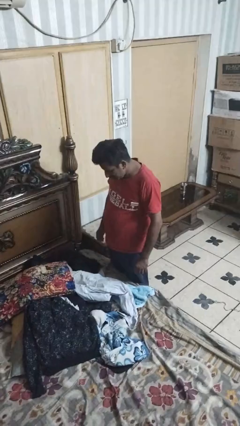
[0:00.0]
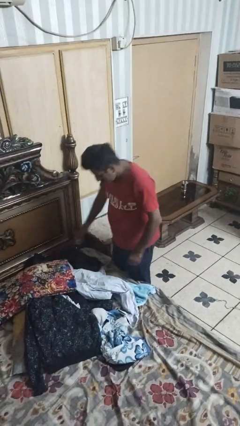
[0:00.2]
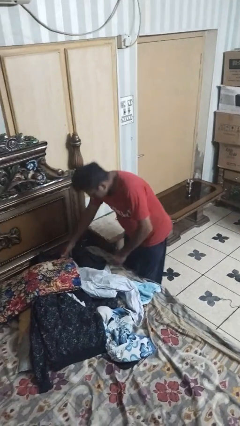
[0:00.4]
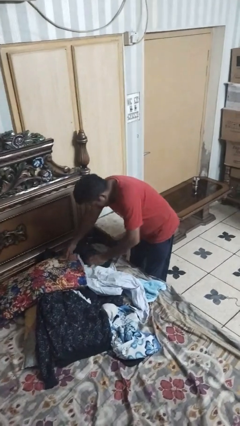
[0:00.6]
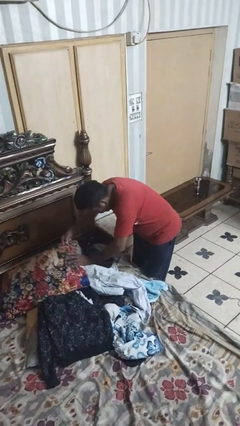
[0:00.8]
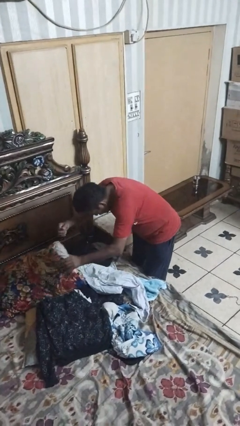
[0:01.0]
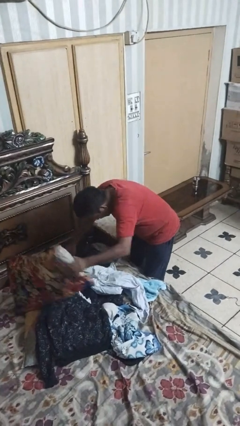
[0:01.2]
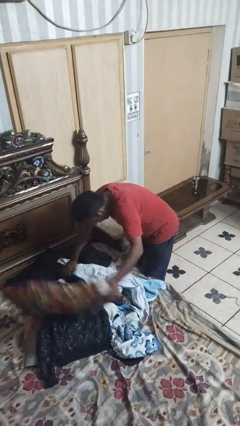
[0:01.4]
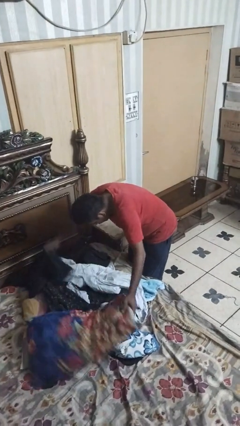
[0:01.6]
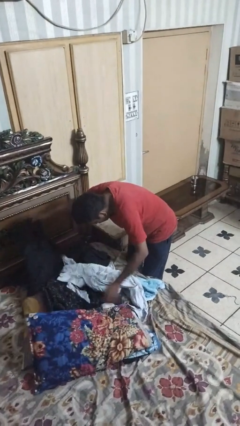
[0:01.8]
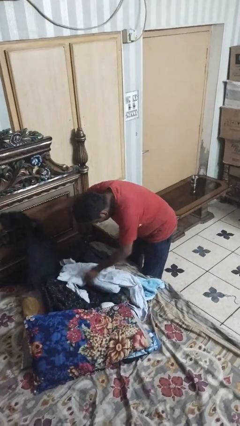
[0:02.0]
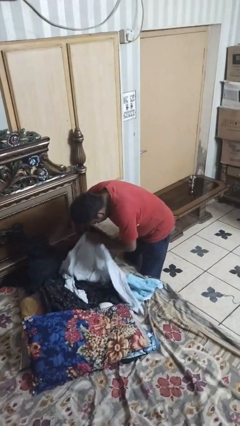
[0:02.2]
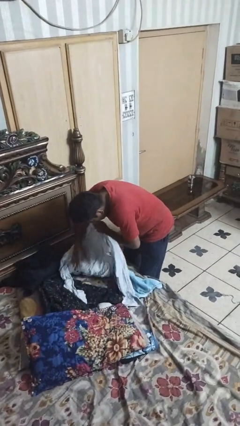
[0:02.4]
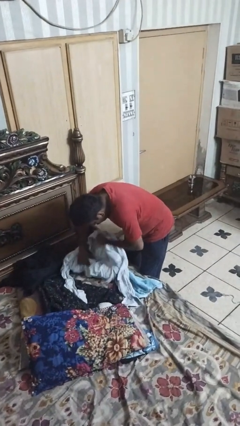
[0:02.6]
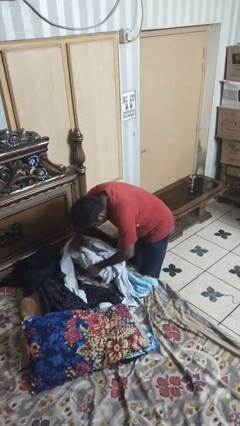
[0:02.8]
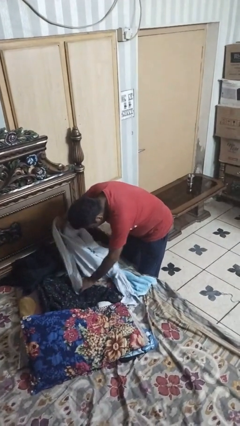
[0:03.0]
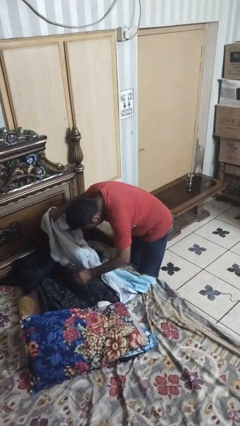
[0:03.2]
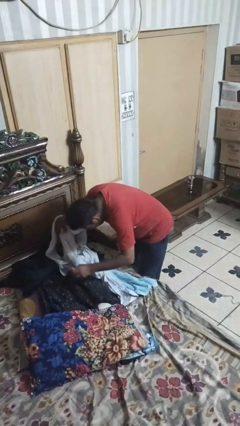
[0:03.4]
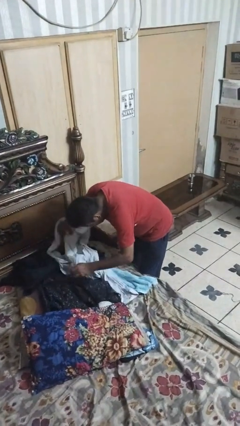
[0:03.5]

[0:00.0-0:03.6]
person searches under bed

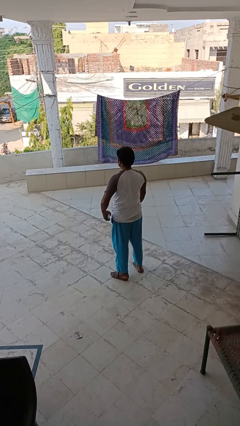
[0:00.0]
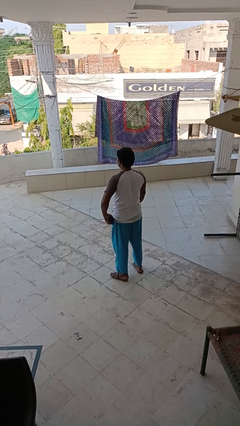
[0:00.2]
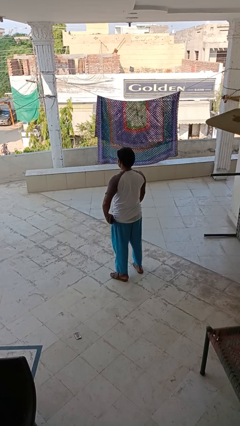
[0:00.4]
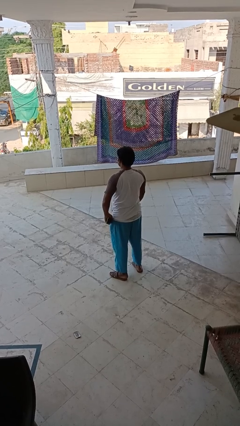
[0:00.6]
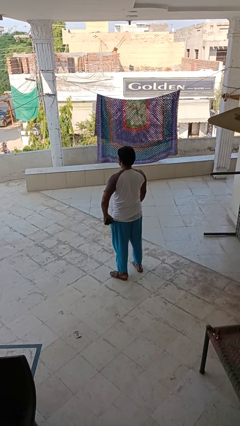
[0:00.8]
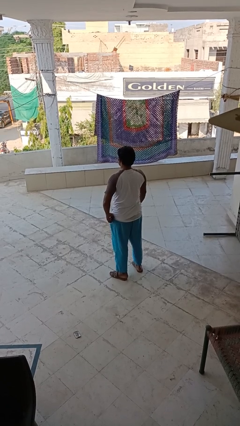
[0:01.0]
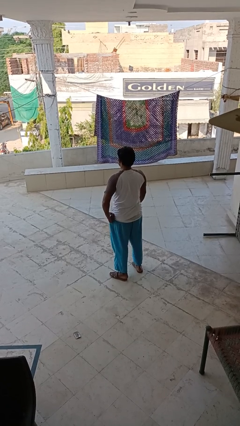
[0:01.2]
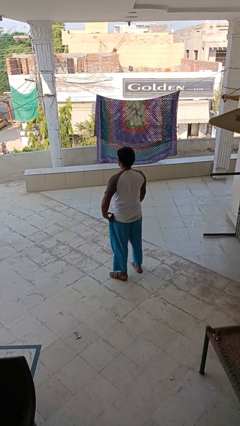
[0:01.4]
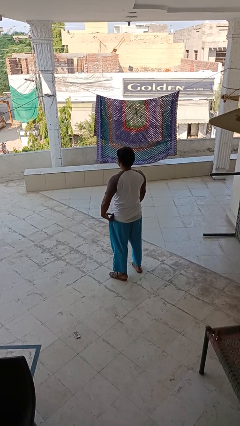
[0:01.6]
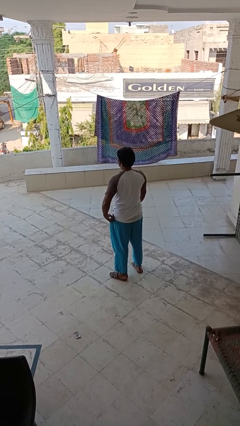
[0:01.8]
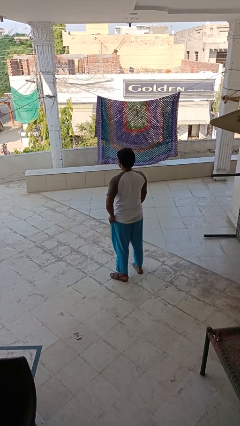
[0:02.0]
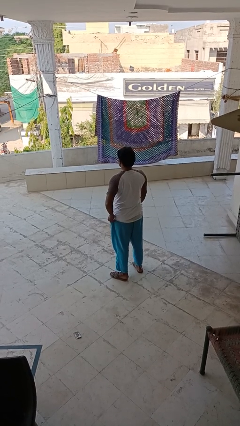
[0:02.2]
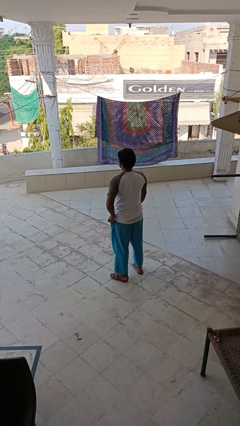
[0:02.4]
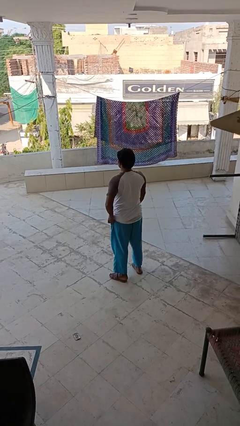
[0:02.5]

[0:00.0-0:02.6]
person puts phone into pocket

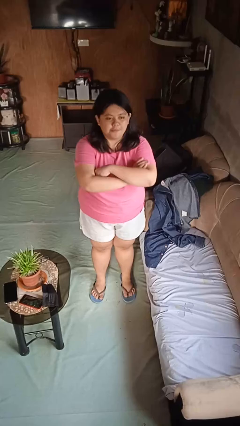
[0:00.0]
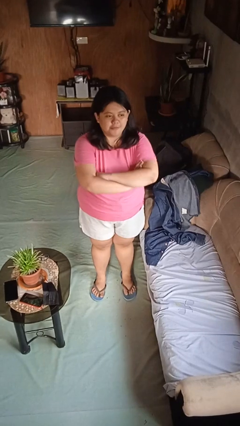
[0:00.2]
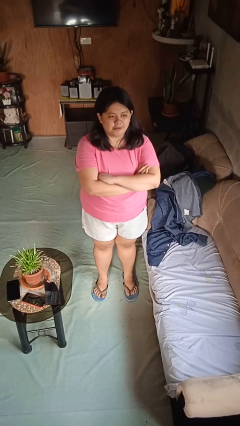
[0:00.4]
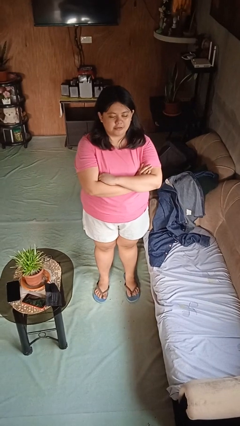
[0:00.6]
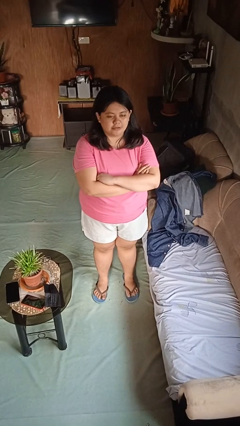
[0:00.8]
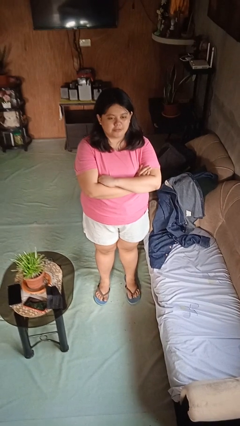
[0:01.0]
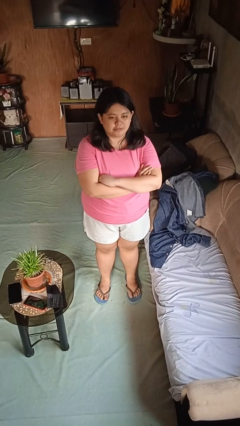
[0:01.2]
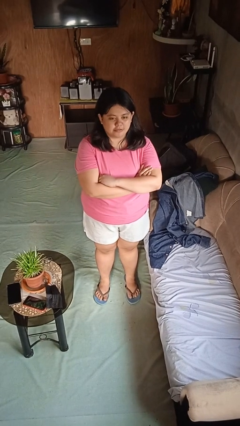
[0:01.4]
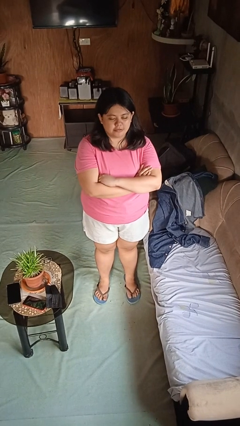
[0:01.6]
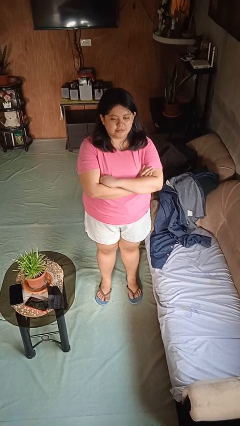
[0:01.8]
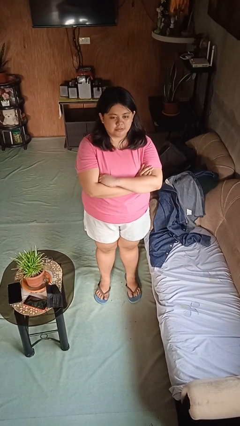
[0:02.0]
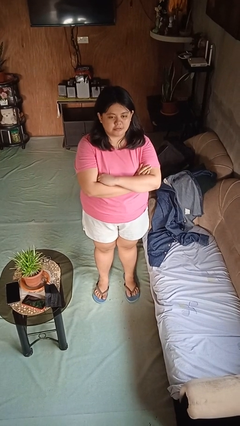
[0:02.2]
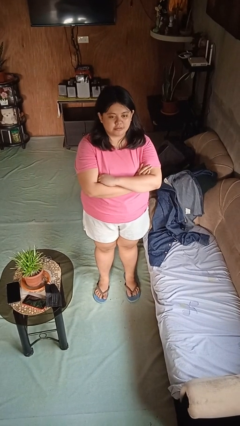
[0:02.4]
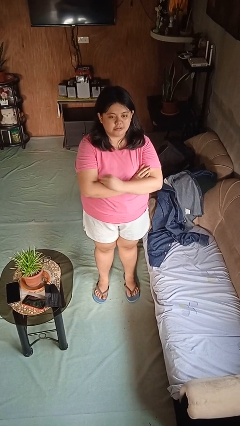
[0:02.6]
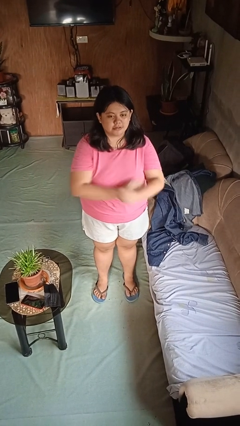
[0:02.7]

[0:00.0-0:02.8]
person crosses arms

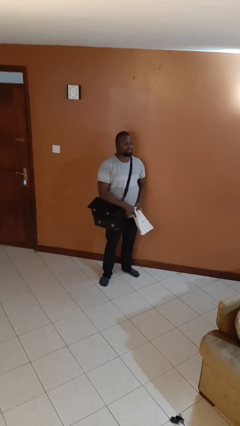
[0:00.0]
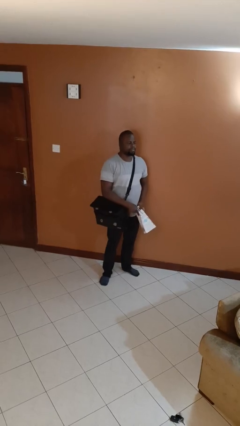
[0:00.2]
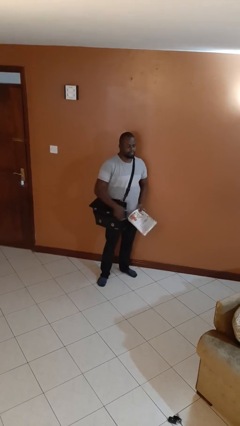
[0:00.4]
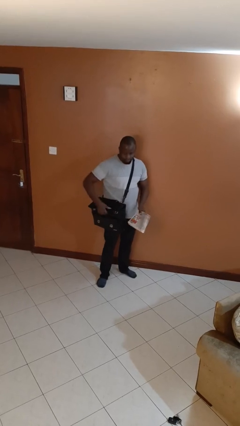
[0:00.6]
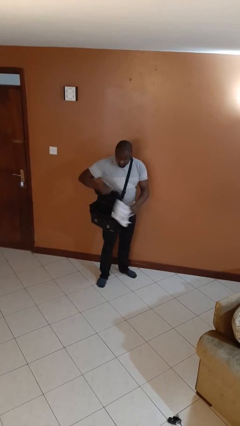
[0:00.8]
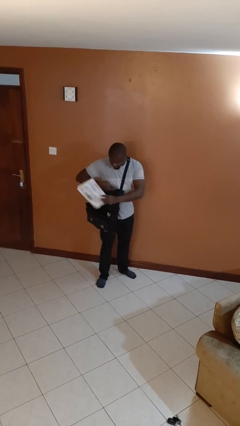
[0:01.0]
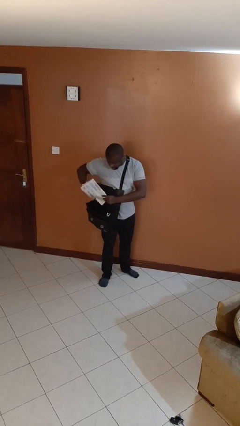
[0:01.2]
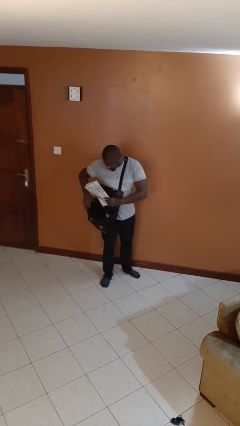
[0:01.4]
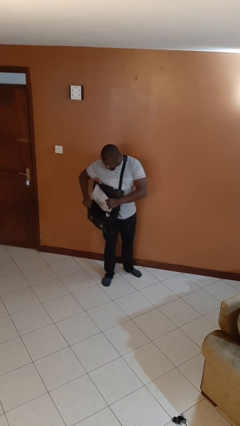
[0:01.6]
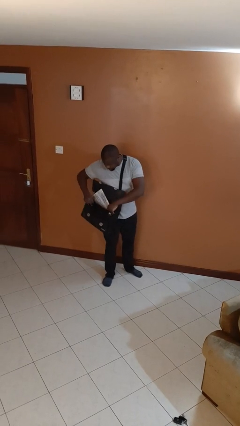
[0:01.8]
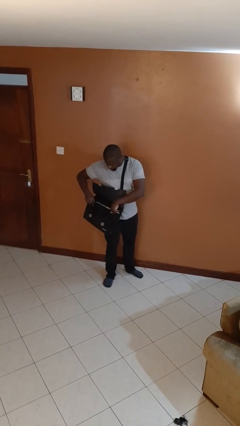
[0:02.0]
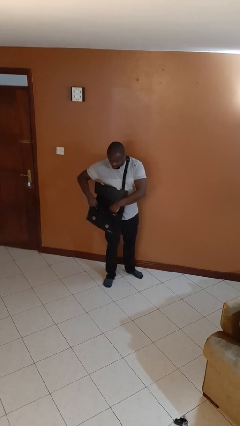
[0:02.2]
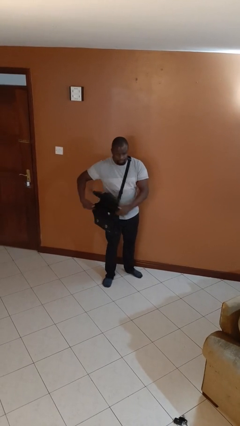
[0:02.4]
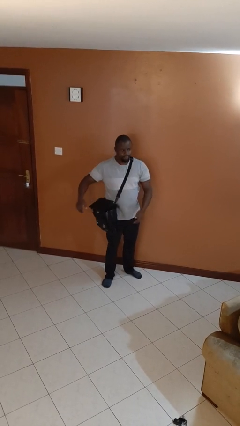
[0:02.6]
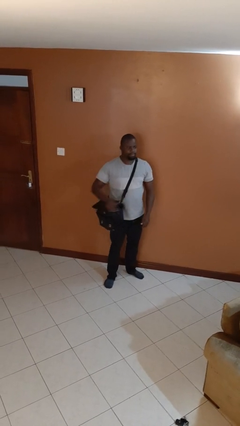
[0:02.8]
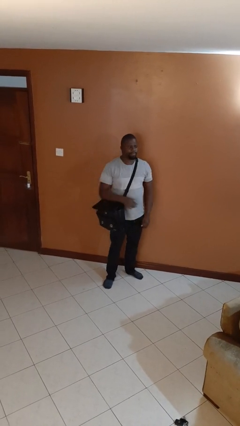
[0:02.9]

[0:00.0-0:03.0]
person puts object into purse

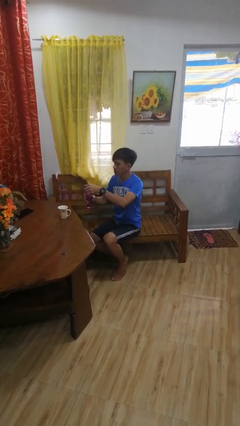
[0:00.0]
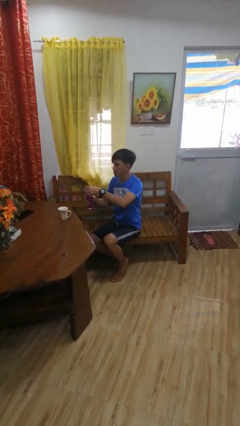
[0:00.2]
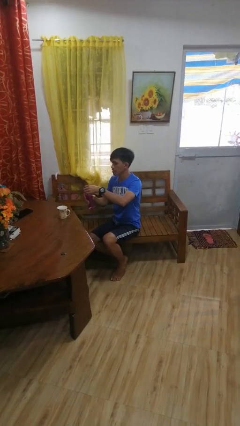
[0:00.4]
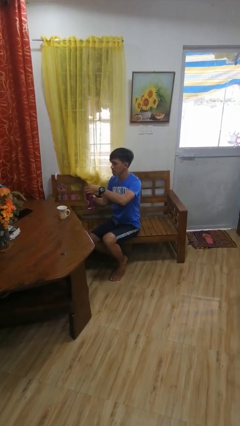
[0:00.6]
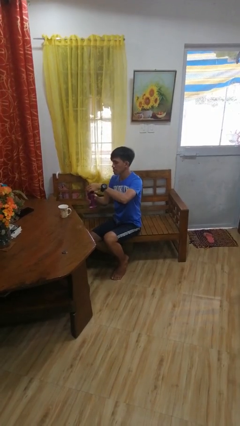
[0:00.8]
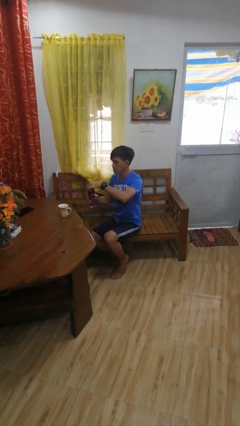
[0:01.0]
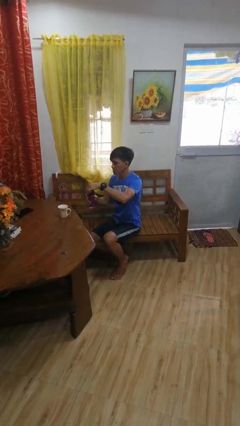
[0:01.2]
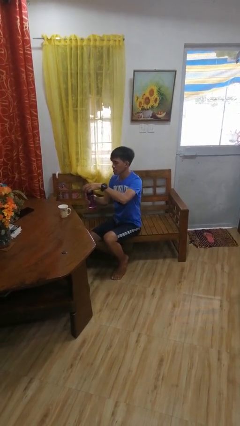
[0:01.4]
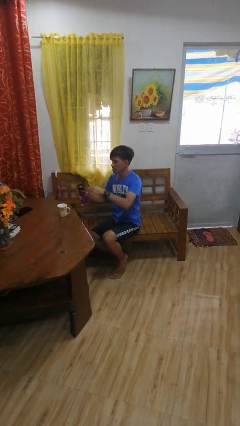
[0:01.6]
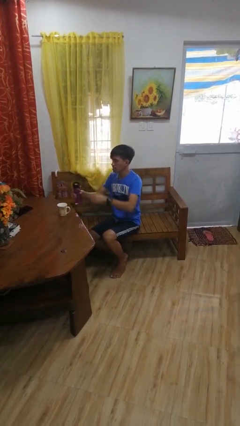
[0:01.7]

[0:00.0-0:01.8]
person screws lid to bottle

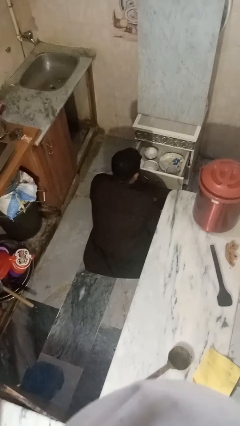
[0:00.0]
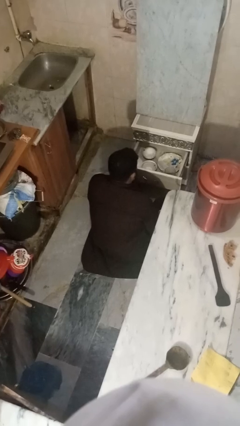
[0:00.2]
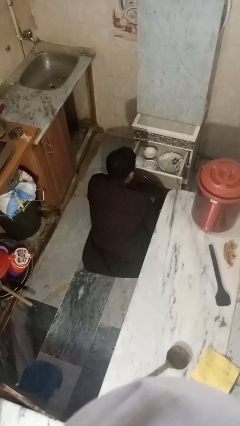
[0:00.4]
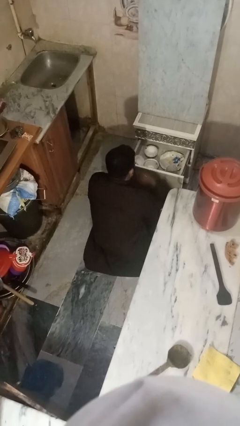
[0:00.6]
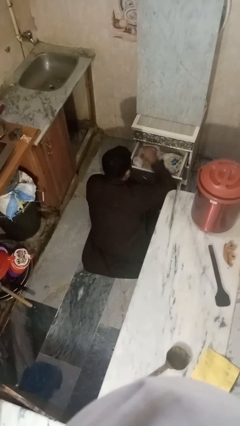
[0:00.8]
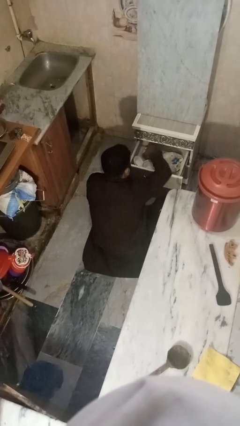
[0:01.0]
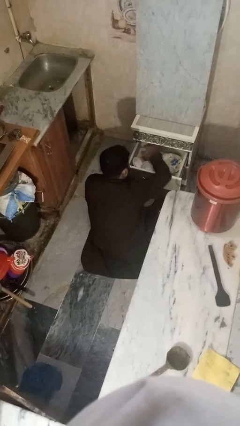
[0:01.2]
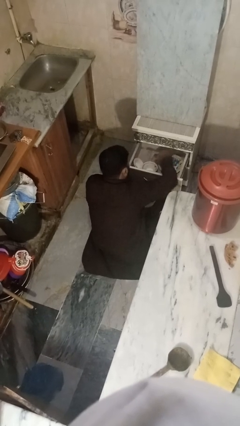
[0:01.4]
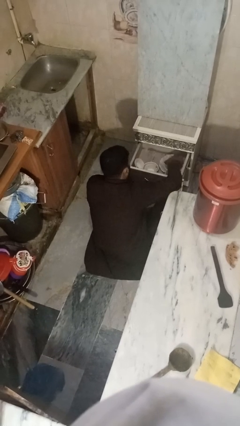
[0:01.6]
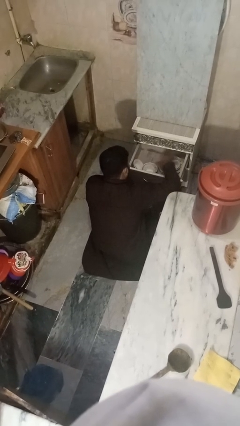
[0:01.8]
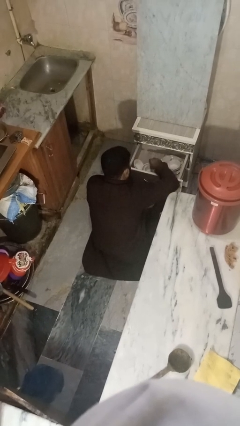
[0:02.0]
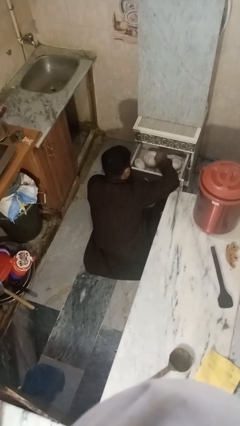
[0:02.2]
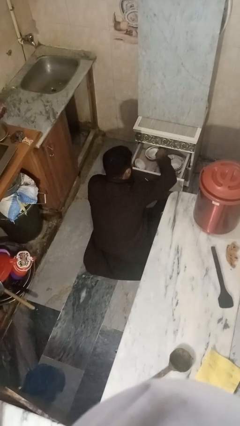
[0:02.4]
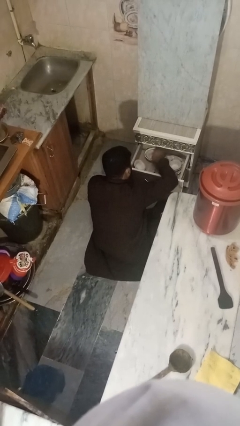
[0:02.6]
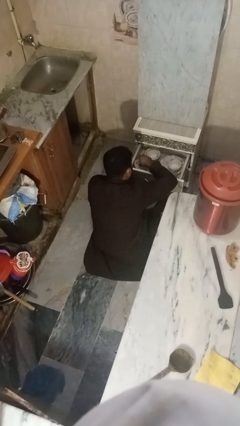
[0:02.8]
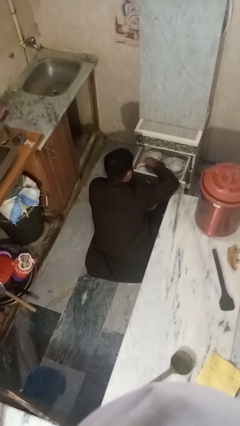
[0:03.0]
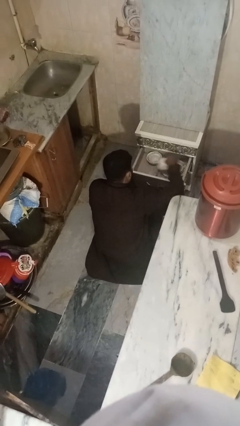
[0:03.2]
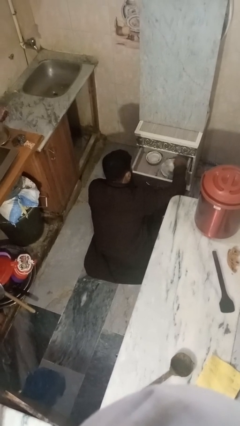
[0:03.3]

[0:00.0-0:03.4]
person searches in kitchen drawer

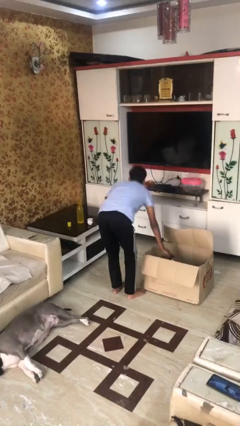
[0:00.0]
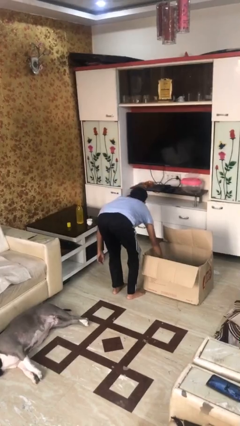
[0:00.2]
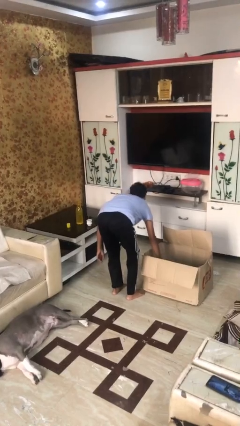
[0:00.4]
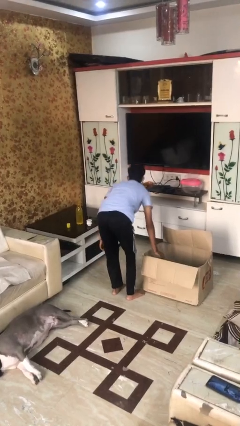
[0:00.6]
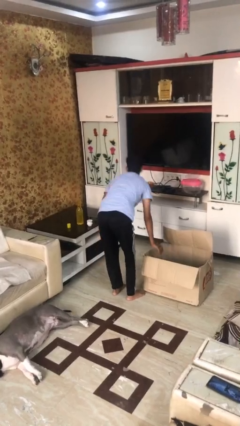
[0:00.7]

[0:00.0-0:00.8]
person puts object into box
